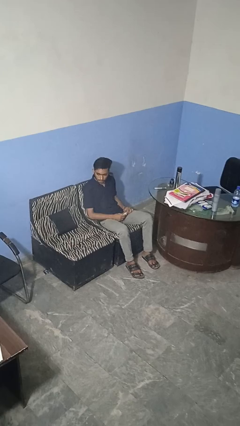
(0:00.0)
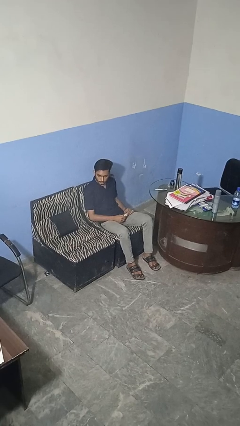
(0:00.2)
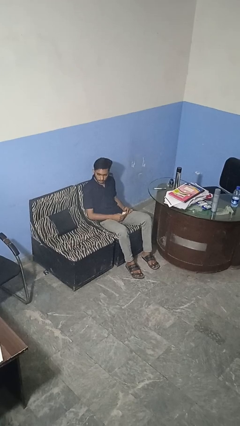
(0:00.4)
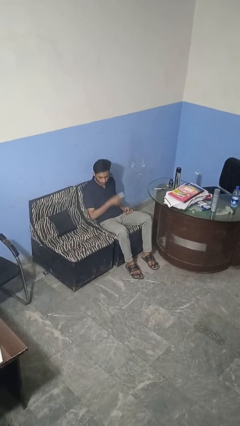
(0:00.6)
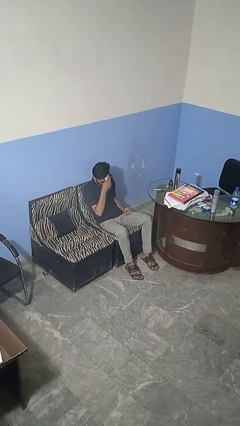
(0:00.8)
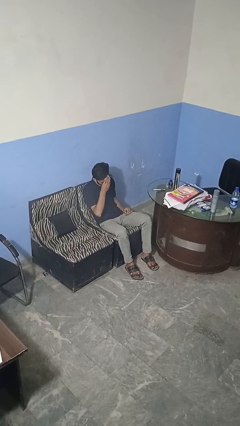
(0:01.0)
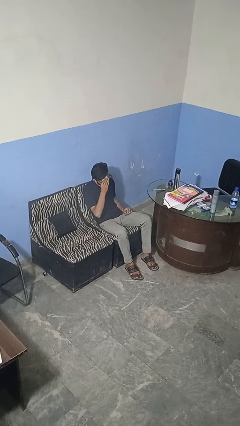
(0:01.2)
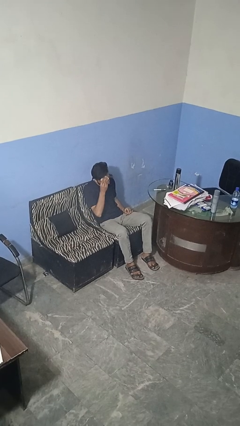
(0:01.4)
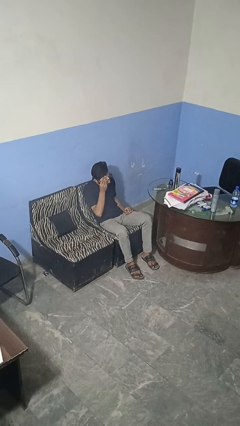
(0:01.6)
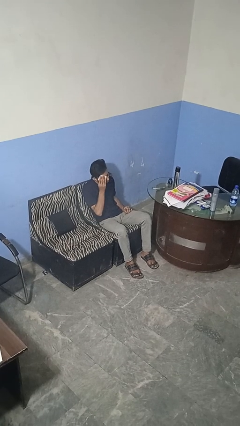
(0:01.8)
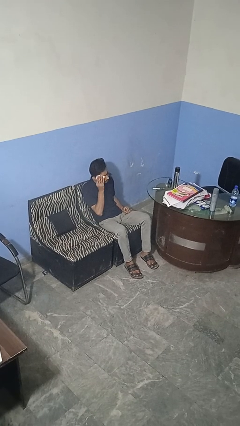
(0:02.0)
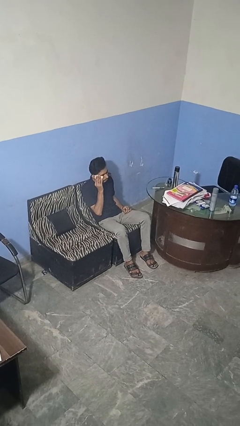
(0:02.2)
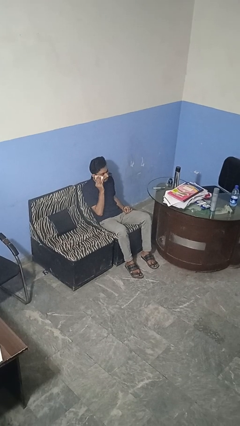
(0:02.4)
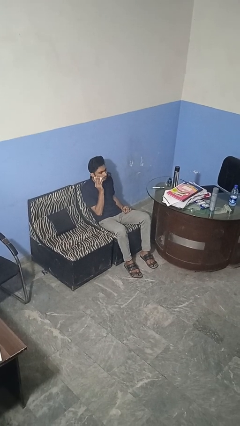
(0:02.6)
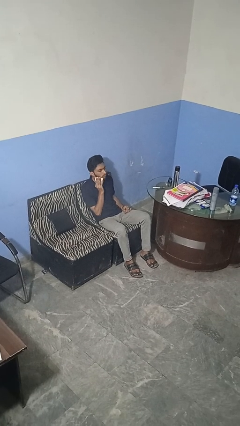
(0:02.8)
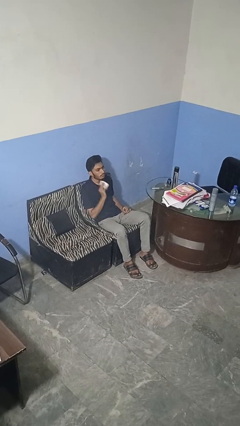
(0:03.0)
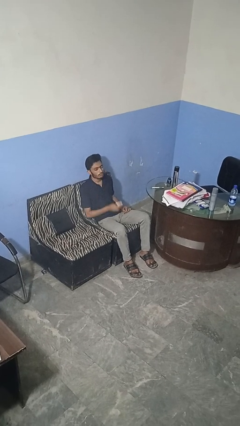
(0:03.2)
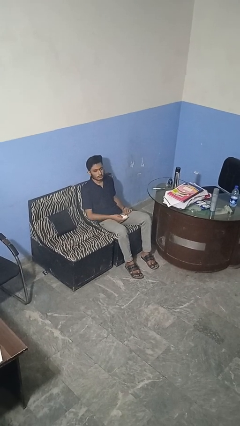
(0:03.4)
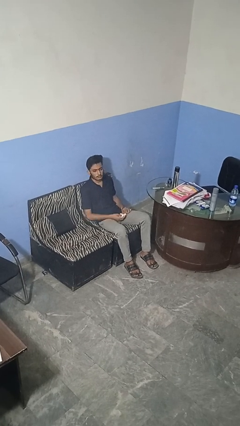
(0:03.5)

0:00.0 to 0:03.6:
person wipes mouth with napkin

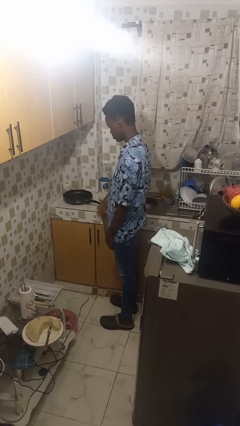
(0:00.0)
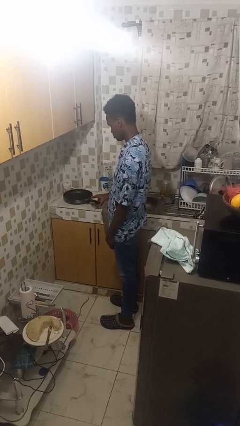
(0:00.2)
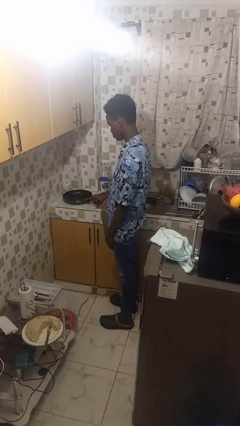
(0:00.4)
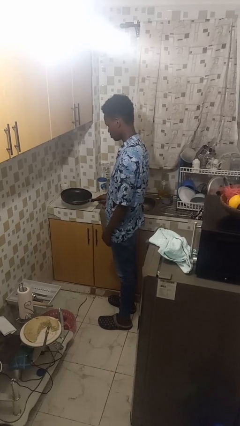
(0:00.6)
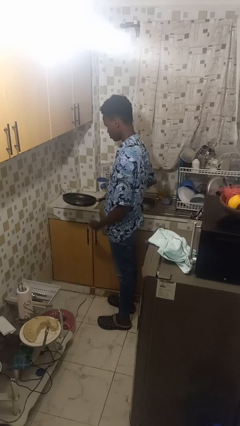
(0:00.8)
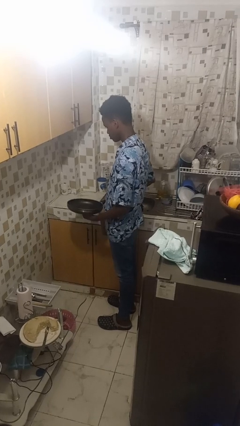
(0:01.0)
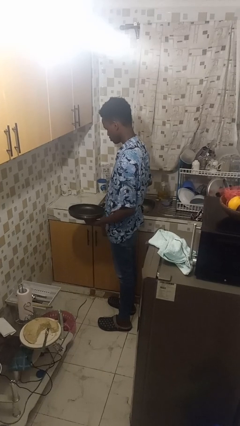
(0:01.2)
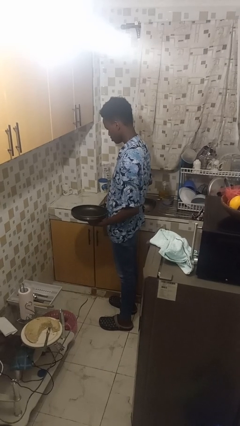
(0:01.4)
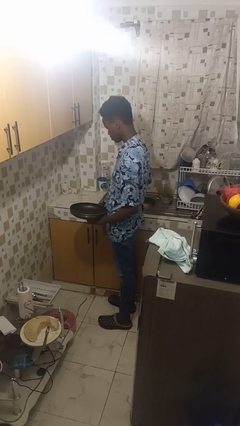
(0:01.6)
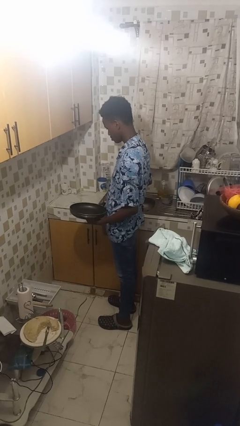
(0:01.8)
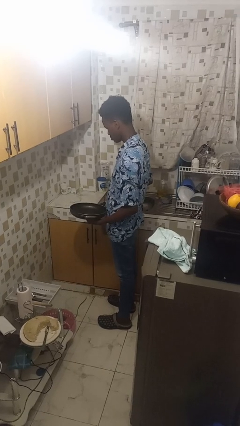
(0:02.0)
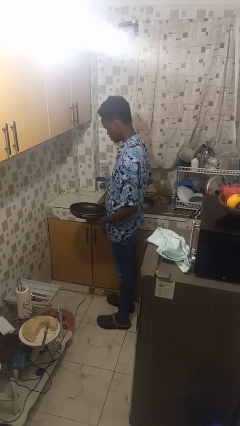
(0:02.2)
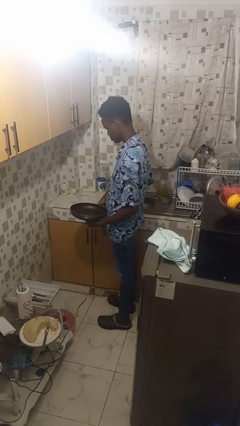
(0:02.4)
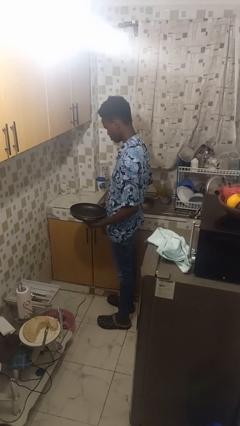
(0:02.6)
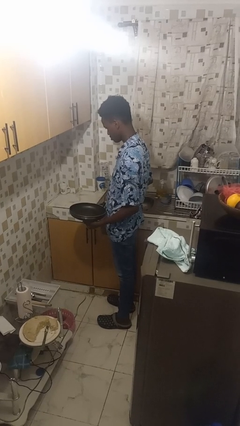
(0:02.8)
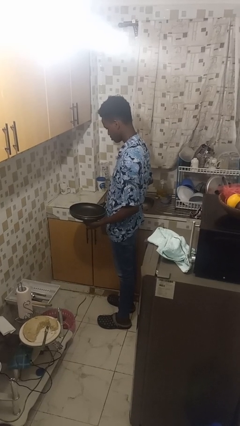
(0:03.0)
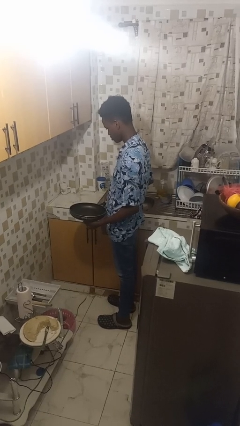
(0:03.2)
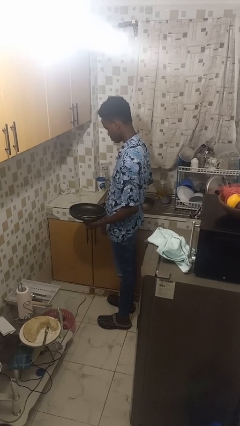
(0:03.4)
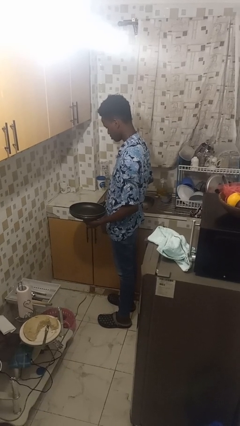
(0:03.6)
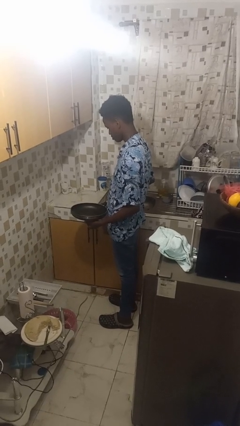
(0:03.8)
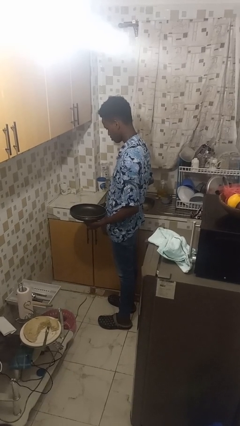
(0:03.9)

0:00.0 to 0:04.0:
person picks up object from countertop

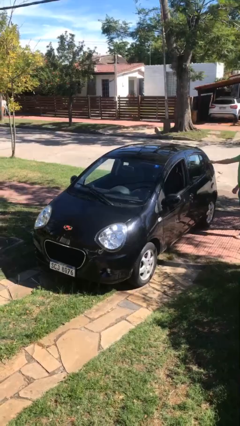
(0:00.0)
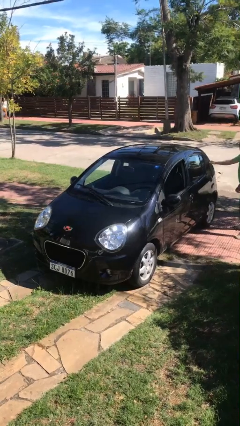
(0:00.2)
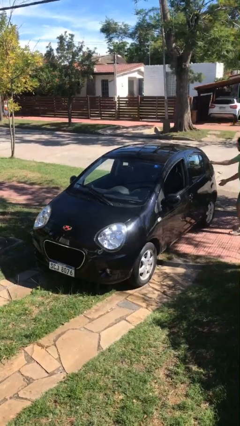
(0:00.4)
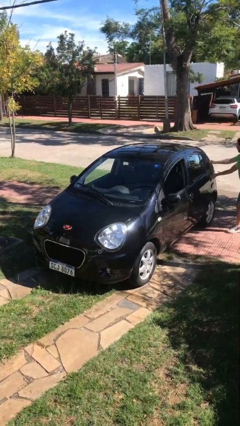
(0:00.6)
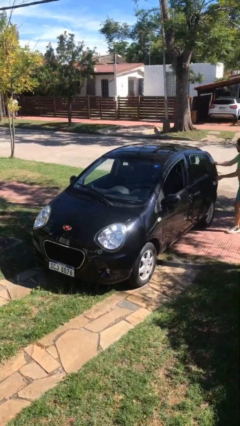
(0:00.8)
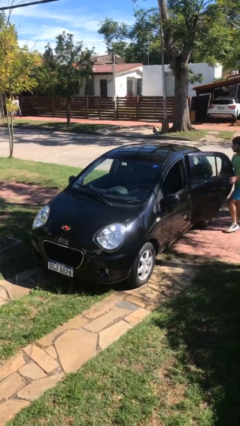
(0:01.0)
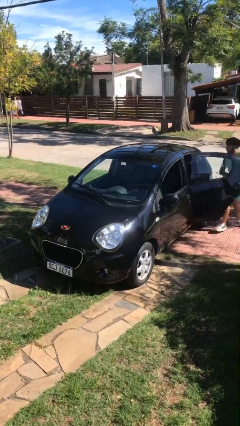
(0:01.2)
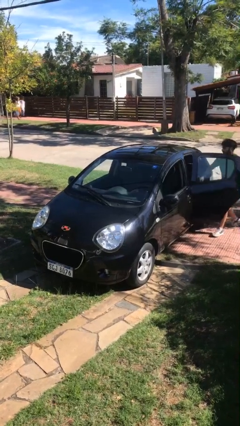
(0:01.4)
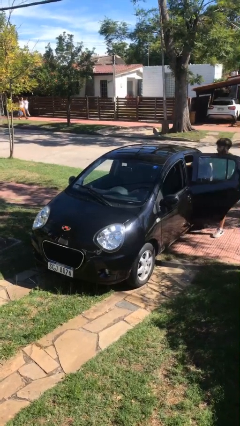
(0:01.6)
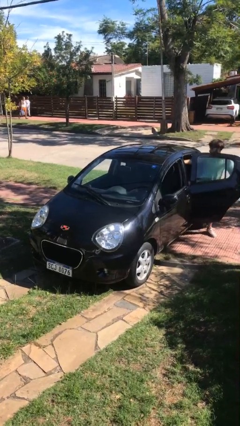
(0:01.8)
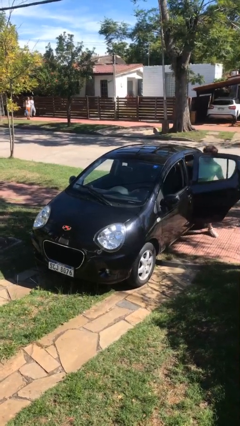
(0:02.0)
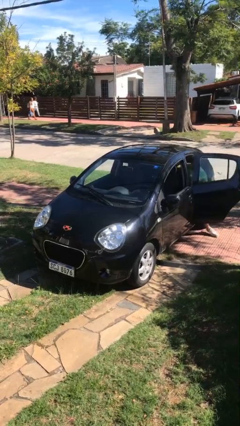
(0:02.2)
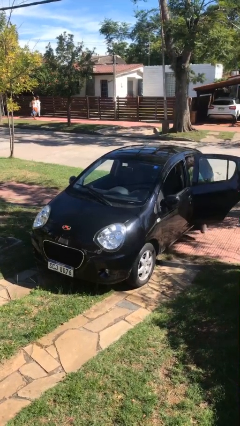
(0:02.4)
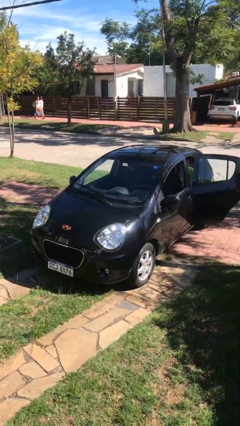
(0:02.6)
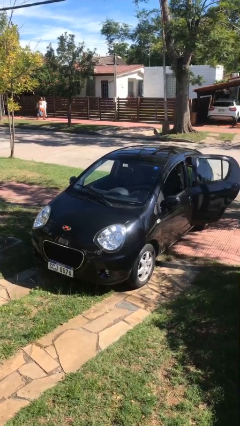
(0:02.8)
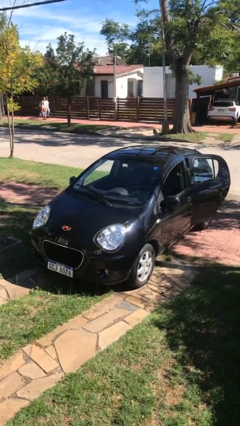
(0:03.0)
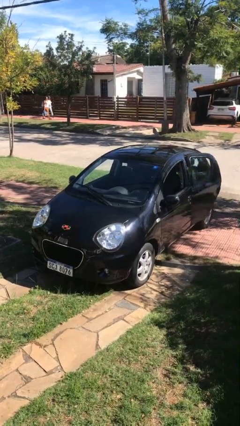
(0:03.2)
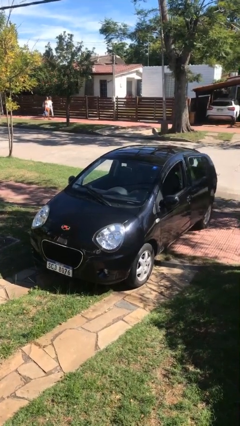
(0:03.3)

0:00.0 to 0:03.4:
car picks up person

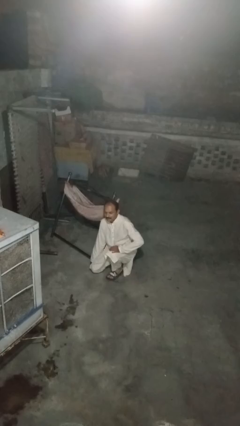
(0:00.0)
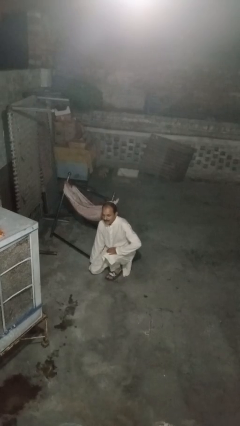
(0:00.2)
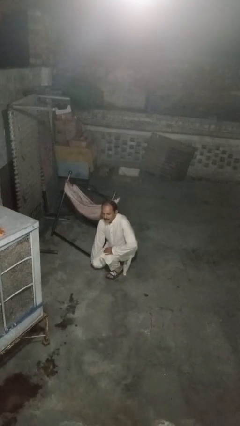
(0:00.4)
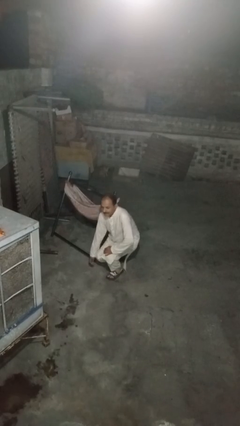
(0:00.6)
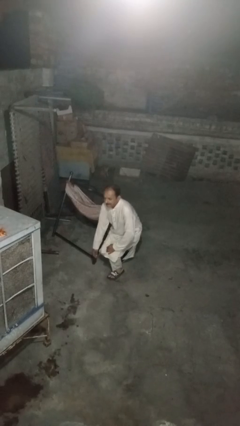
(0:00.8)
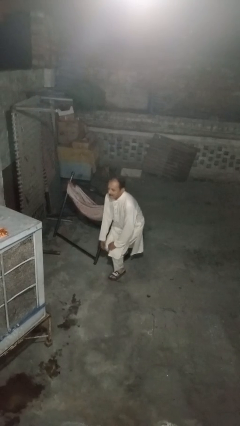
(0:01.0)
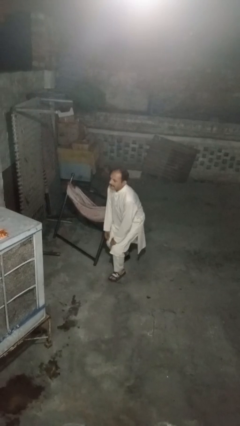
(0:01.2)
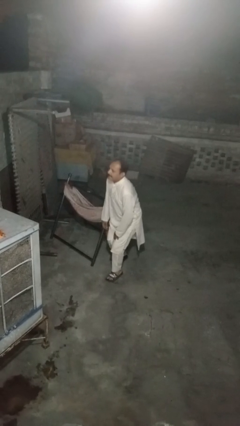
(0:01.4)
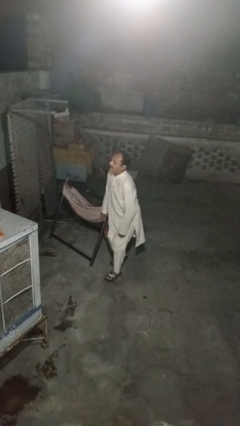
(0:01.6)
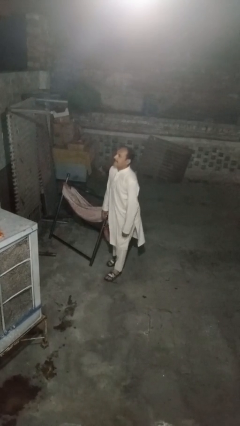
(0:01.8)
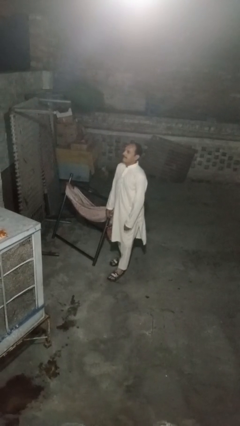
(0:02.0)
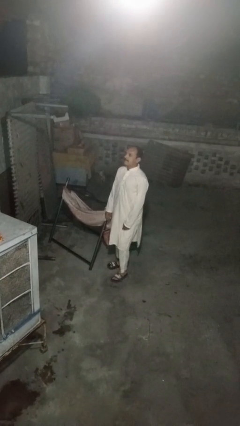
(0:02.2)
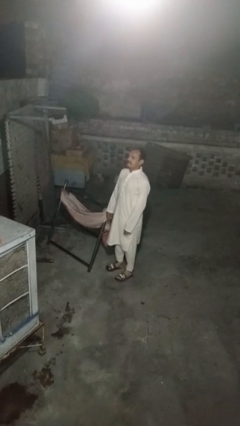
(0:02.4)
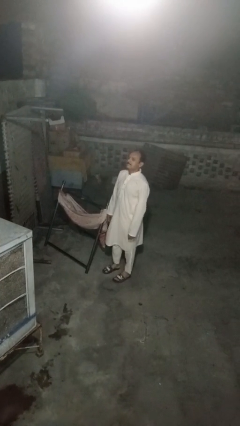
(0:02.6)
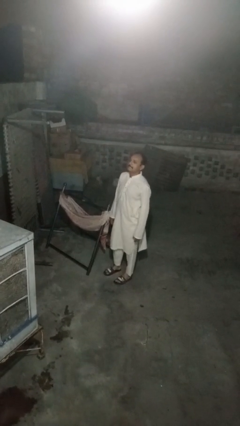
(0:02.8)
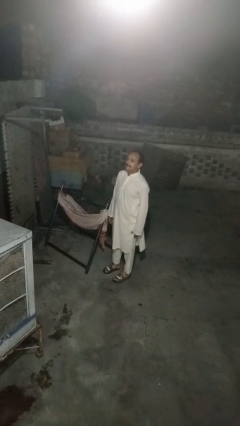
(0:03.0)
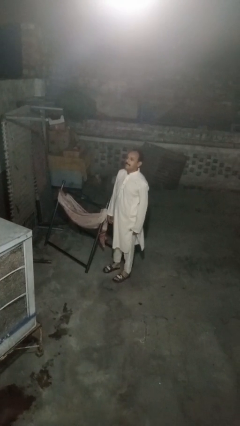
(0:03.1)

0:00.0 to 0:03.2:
person stands up from floor

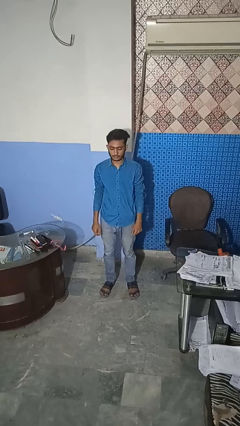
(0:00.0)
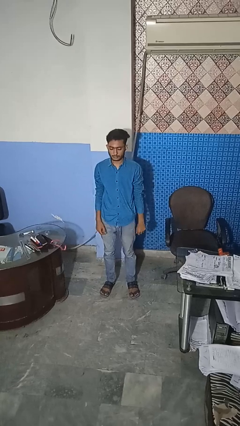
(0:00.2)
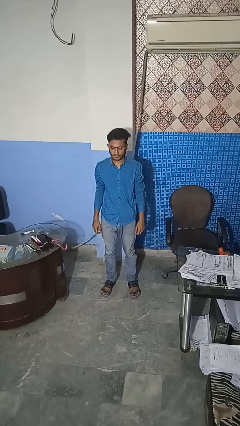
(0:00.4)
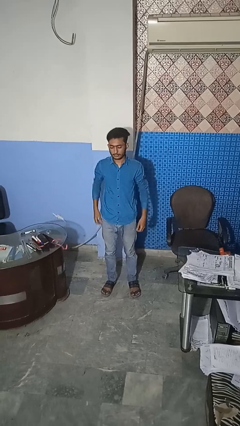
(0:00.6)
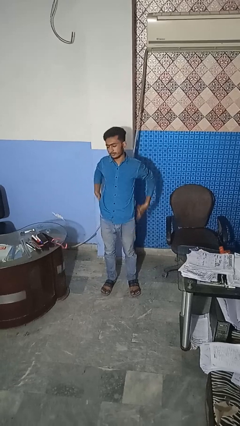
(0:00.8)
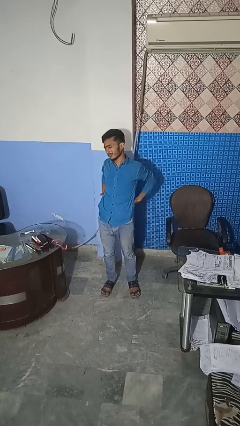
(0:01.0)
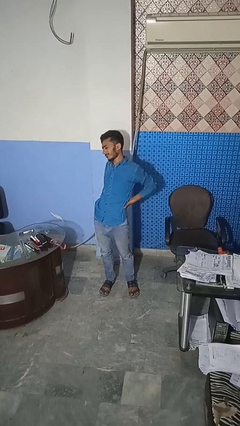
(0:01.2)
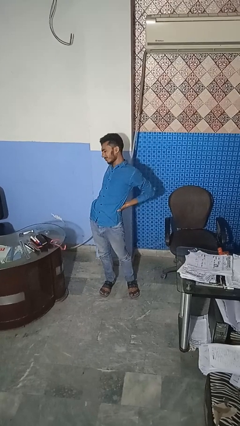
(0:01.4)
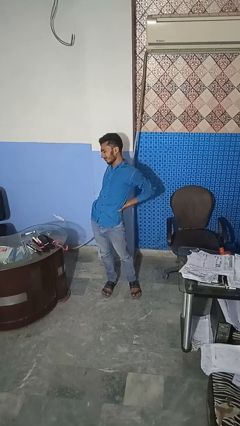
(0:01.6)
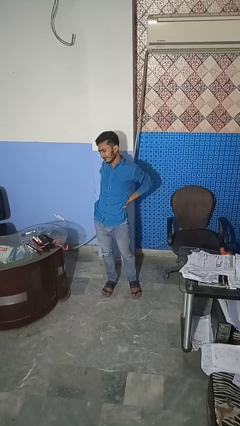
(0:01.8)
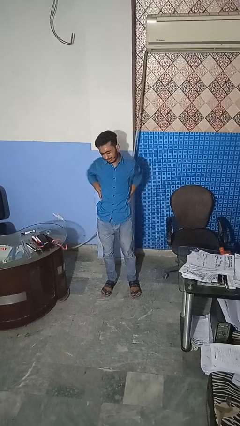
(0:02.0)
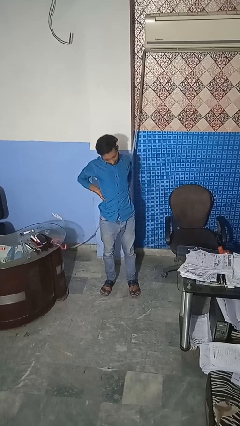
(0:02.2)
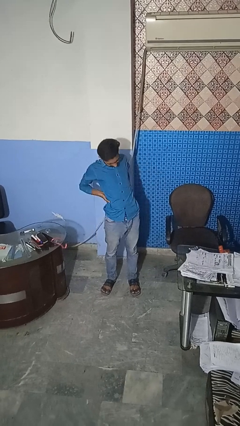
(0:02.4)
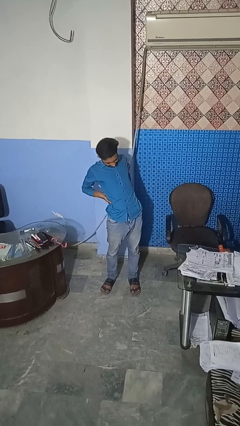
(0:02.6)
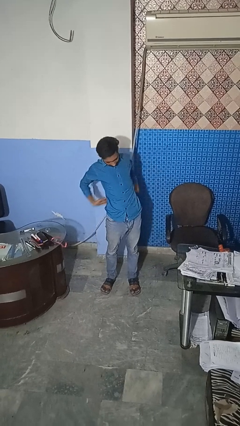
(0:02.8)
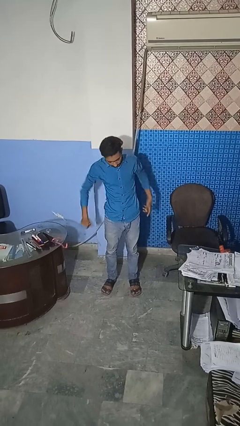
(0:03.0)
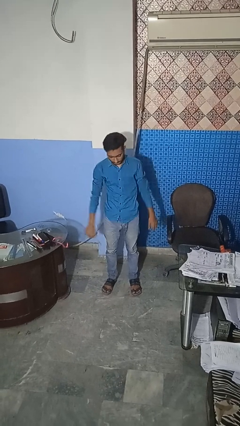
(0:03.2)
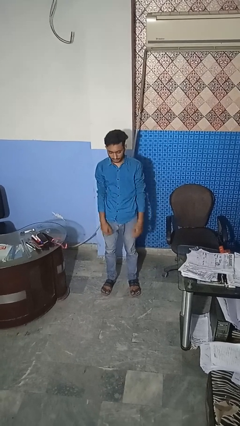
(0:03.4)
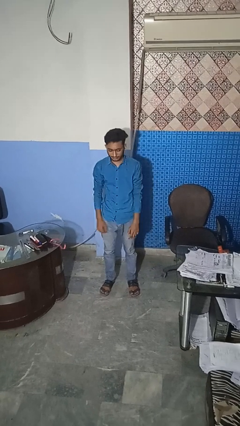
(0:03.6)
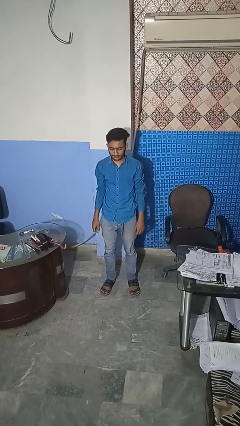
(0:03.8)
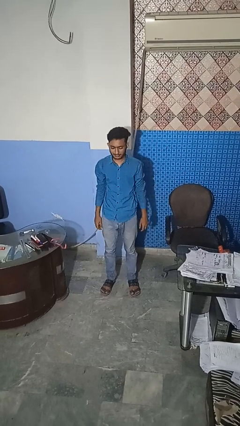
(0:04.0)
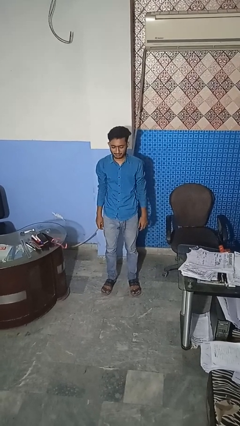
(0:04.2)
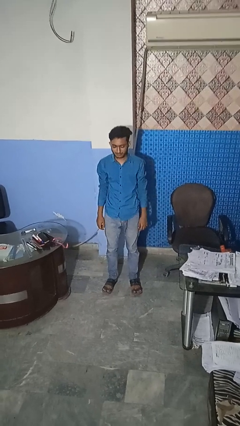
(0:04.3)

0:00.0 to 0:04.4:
person stretches back
